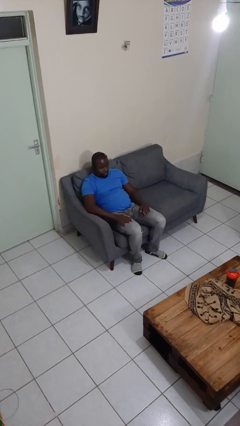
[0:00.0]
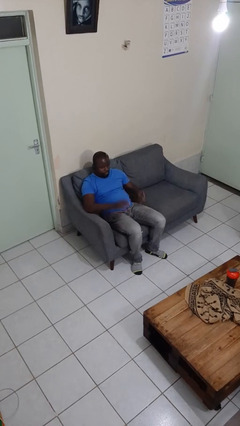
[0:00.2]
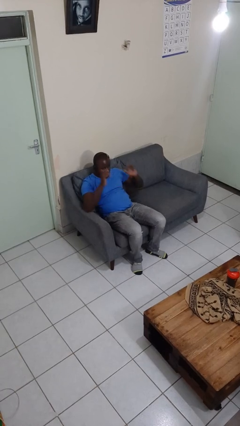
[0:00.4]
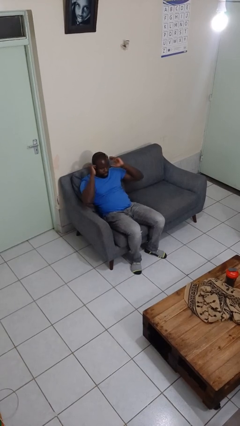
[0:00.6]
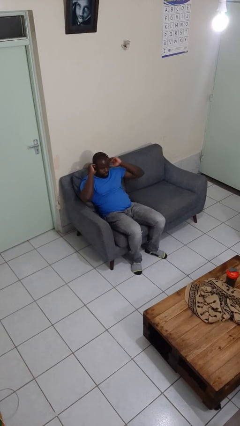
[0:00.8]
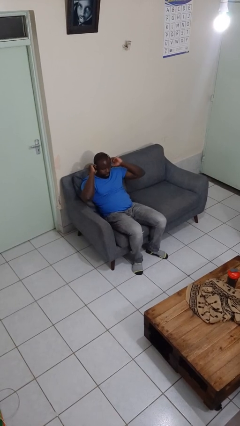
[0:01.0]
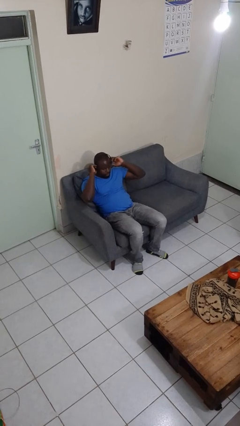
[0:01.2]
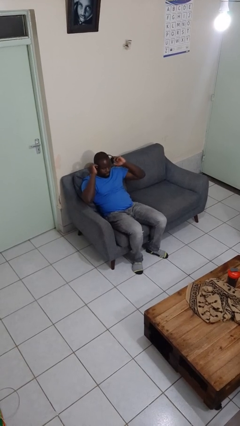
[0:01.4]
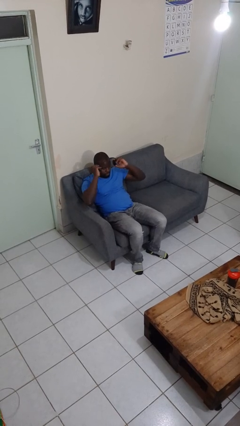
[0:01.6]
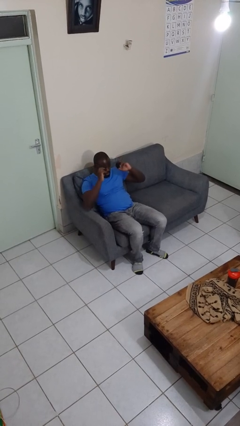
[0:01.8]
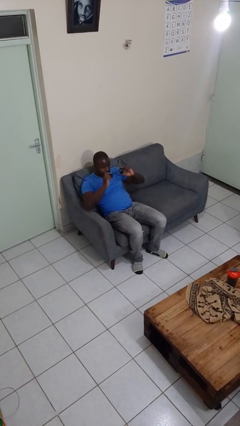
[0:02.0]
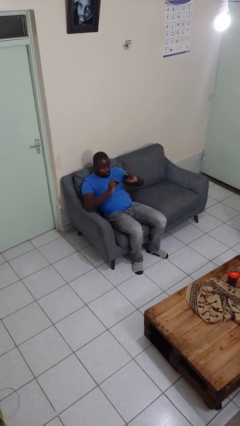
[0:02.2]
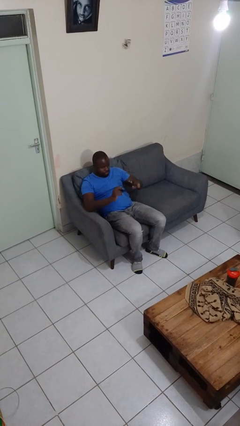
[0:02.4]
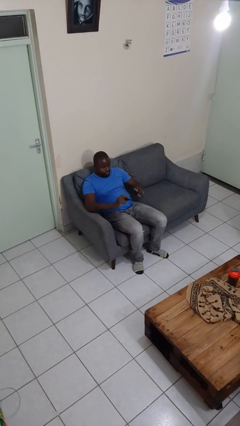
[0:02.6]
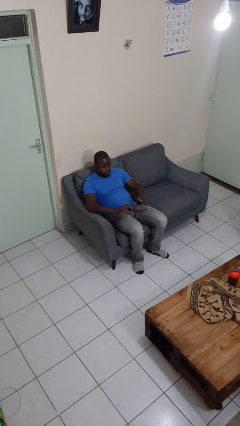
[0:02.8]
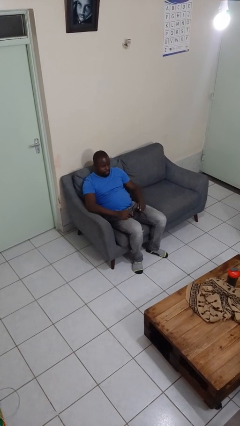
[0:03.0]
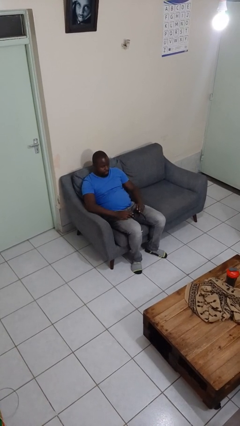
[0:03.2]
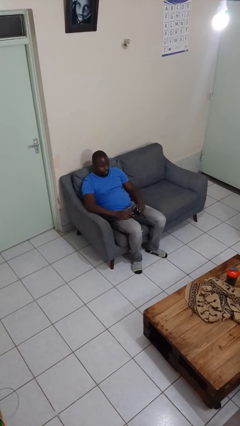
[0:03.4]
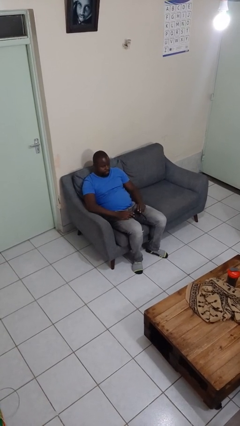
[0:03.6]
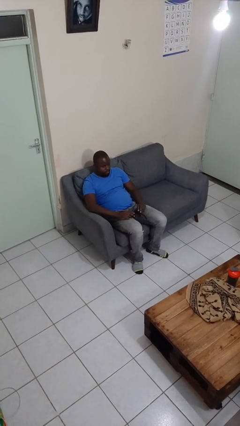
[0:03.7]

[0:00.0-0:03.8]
person takes off headphones

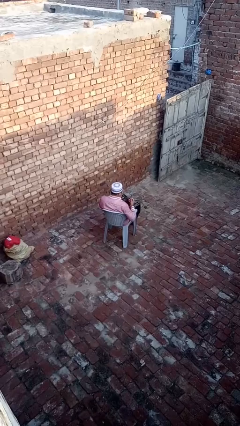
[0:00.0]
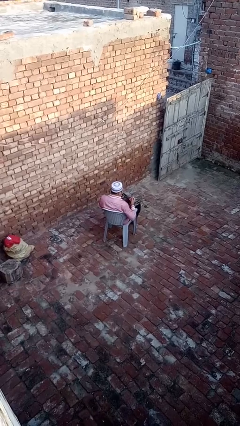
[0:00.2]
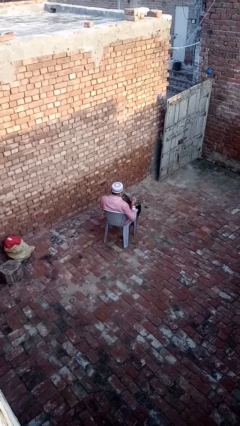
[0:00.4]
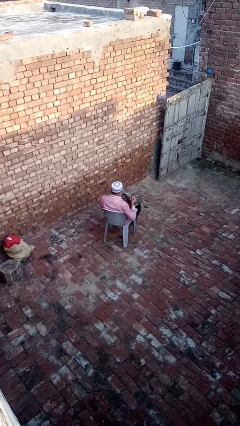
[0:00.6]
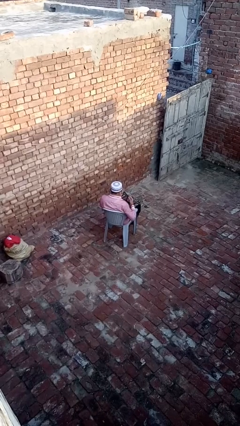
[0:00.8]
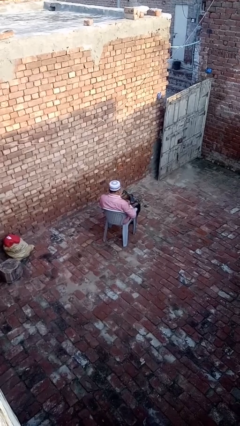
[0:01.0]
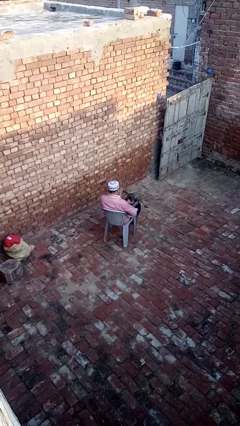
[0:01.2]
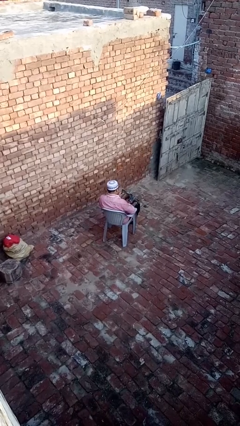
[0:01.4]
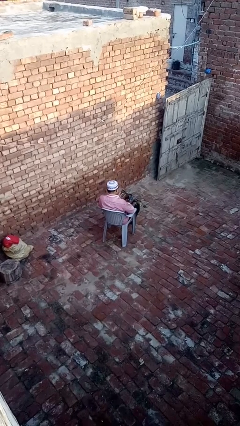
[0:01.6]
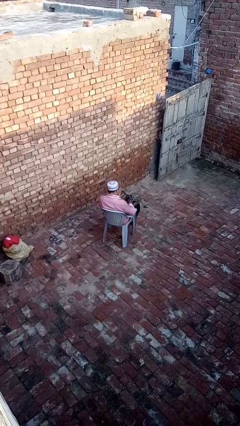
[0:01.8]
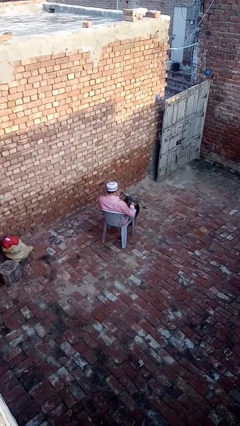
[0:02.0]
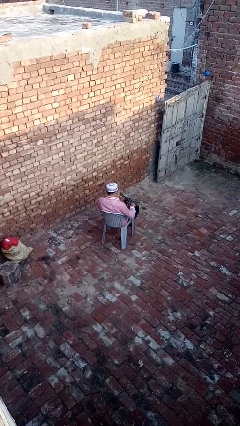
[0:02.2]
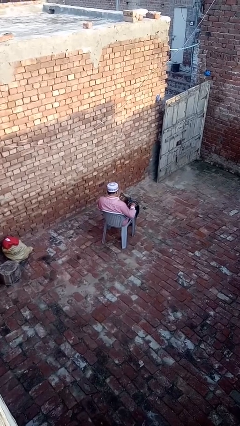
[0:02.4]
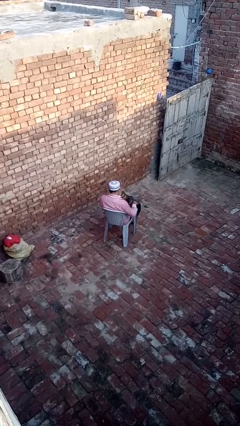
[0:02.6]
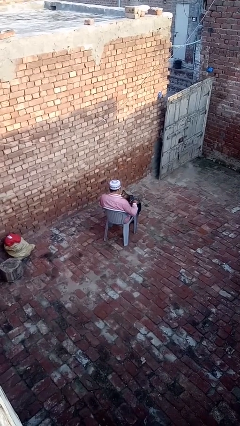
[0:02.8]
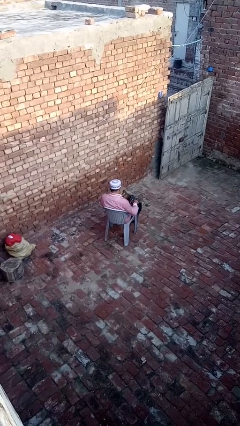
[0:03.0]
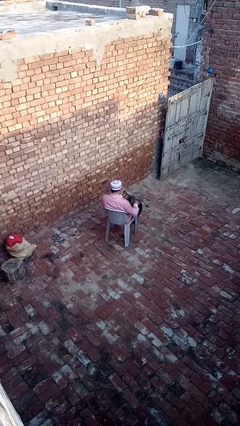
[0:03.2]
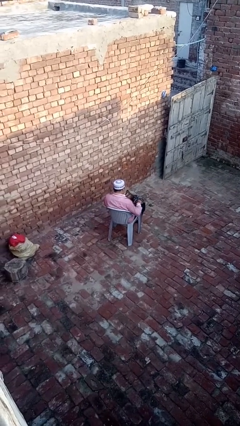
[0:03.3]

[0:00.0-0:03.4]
person puts object into purse

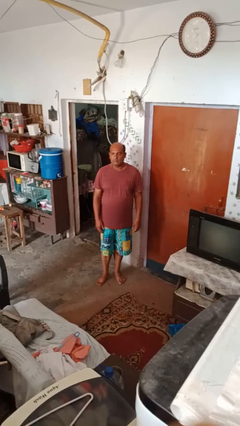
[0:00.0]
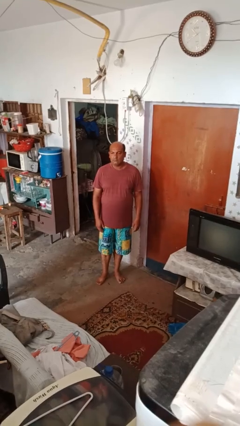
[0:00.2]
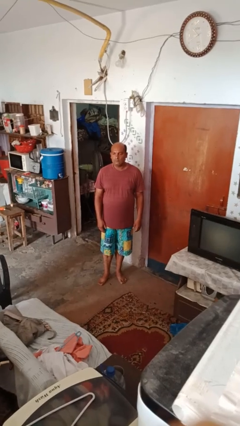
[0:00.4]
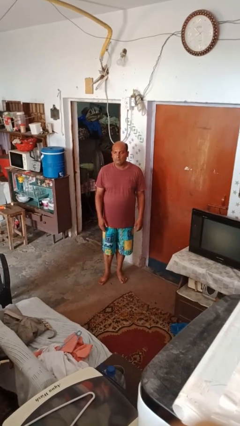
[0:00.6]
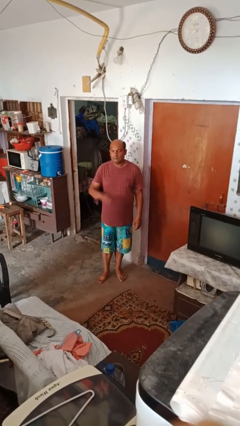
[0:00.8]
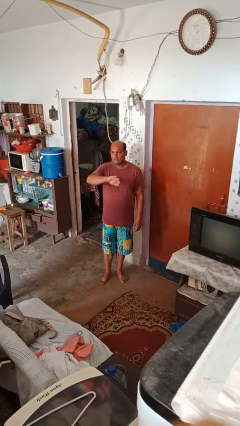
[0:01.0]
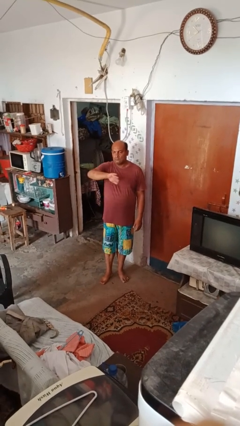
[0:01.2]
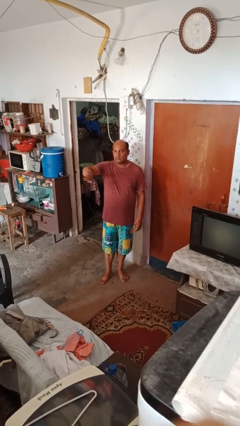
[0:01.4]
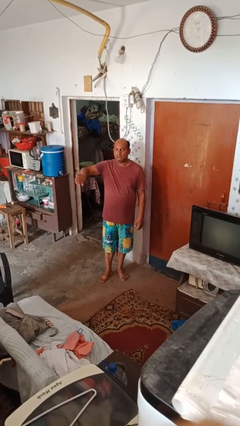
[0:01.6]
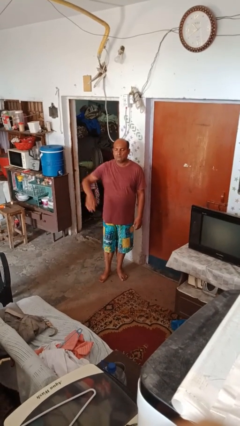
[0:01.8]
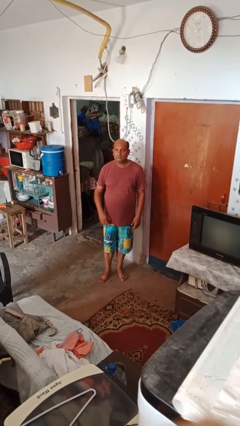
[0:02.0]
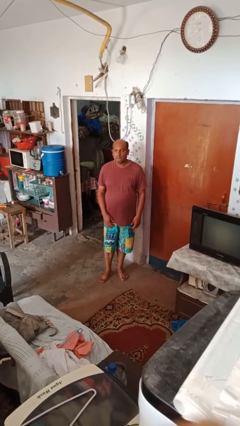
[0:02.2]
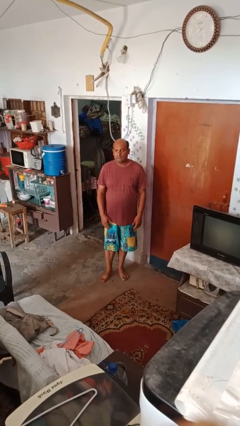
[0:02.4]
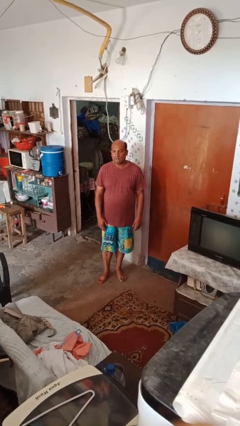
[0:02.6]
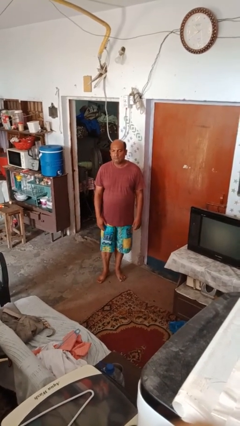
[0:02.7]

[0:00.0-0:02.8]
person gestures swipe left

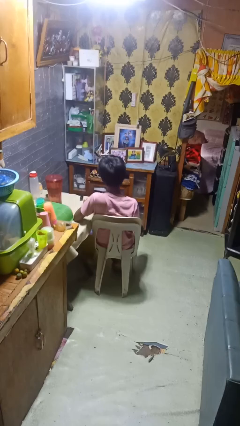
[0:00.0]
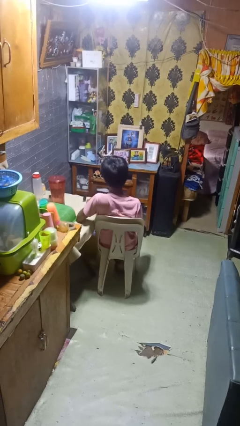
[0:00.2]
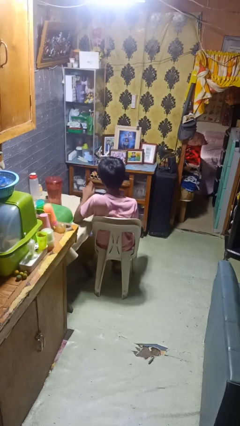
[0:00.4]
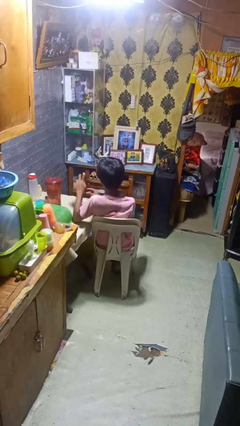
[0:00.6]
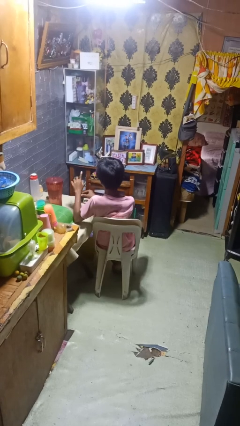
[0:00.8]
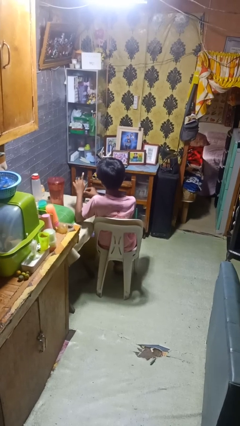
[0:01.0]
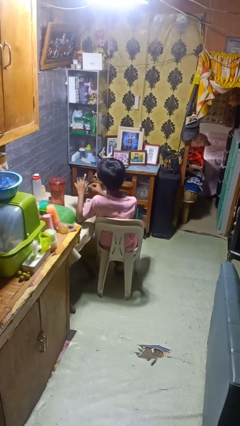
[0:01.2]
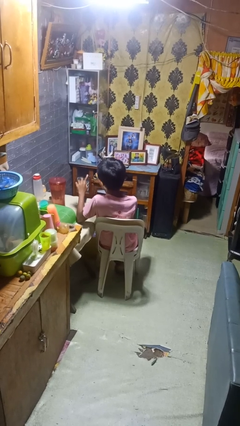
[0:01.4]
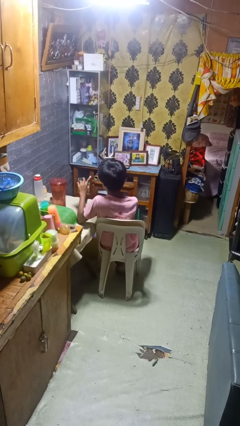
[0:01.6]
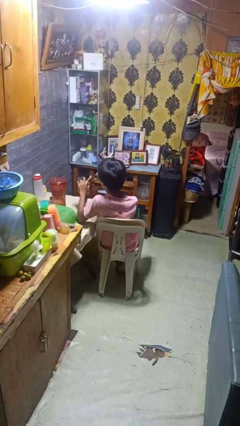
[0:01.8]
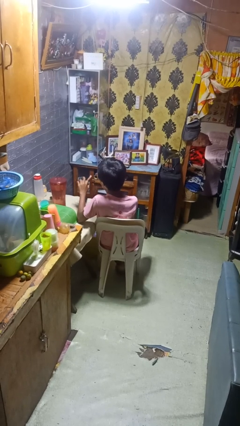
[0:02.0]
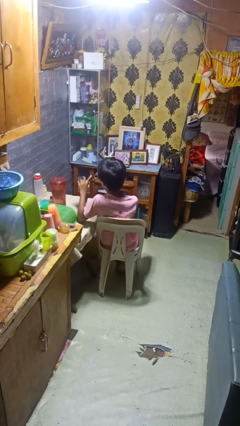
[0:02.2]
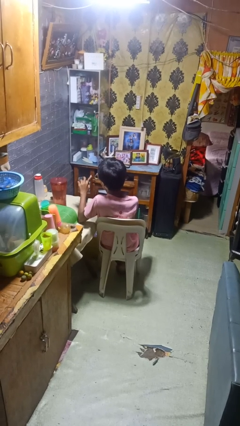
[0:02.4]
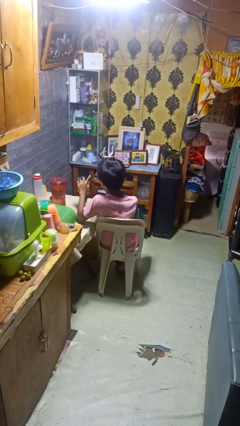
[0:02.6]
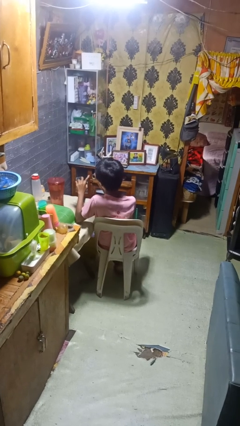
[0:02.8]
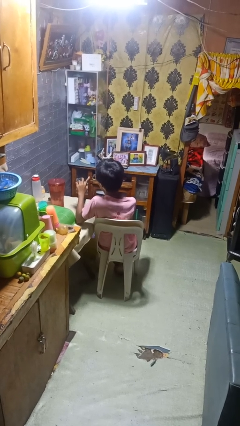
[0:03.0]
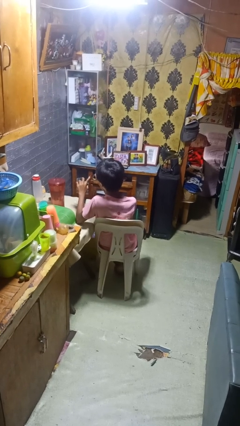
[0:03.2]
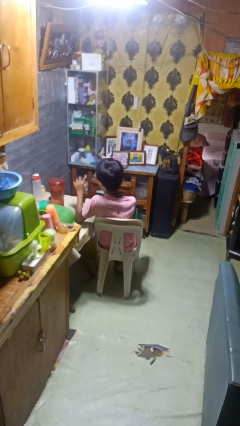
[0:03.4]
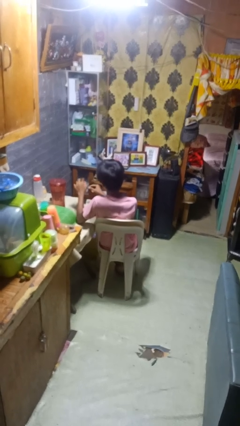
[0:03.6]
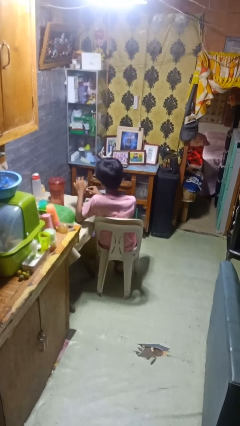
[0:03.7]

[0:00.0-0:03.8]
person paints fingernails

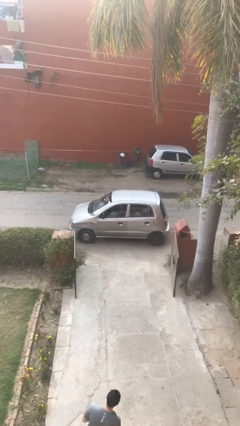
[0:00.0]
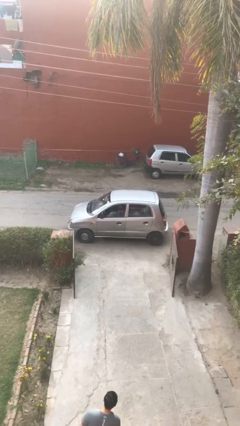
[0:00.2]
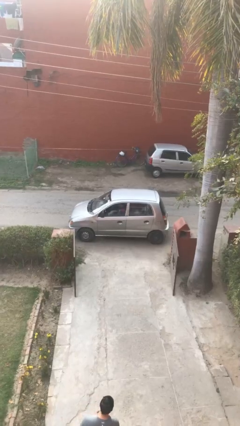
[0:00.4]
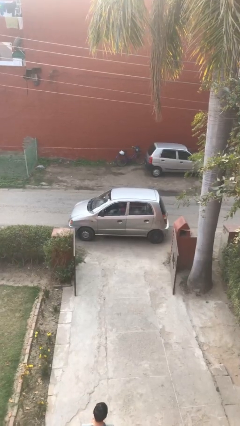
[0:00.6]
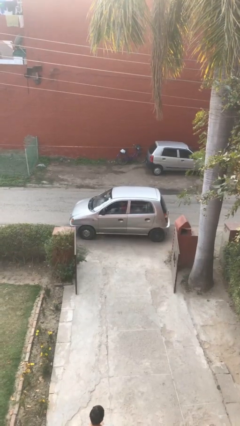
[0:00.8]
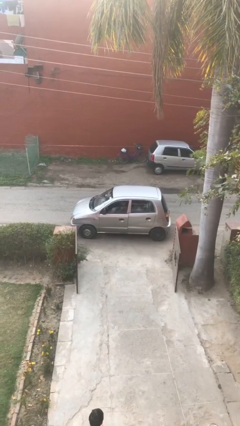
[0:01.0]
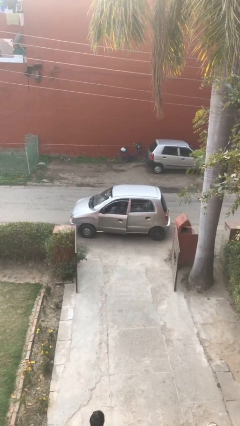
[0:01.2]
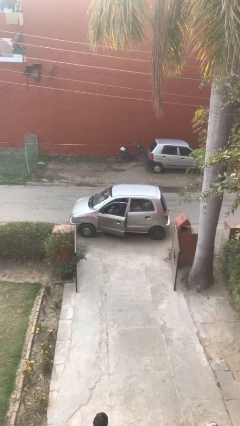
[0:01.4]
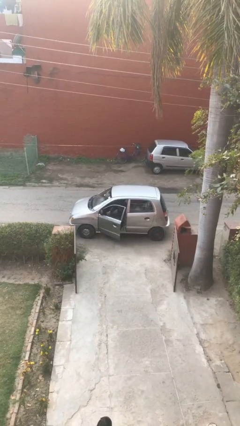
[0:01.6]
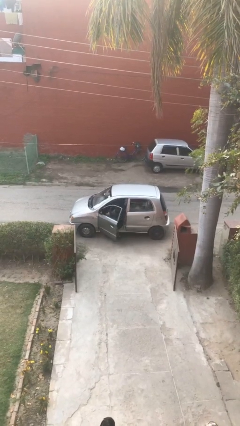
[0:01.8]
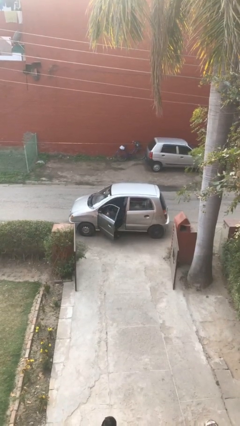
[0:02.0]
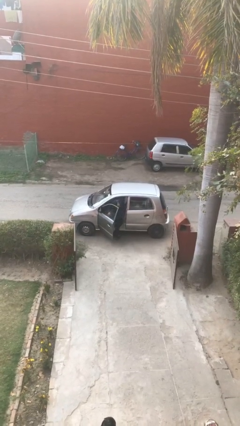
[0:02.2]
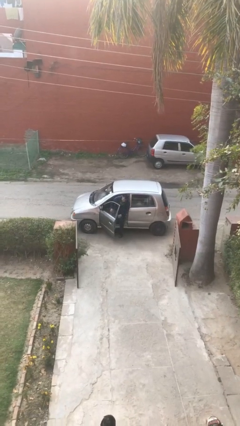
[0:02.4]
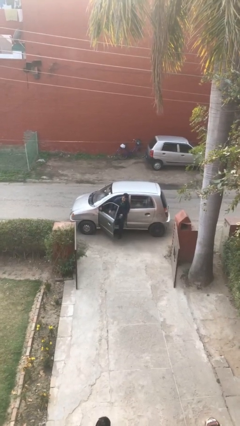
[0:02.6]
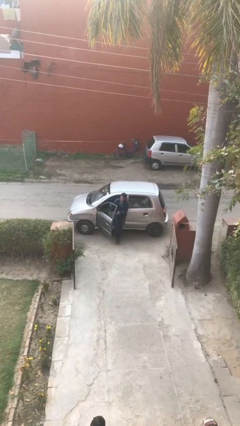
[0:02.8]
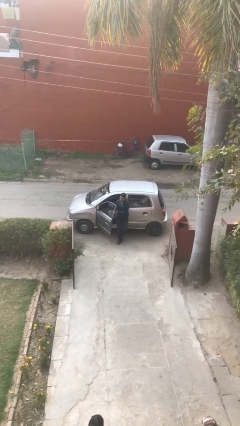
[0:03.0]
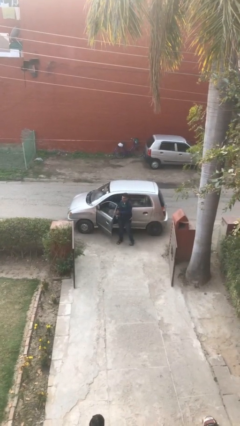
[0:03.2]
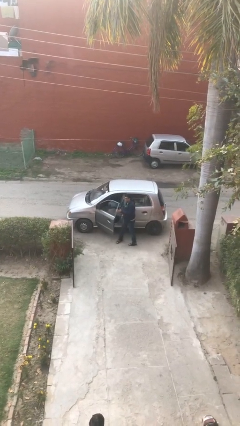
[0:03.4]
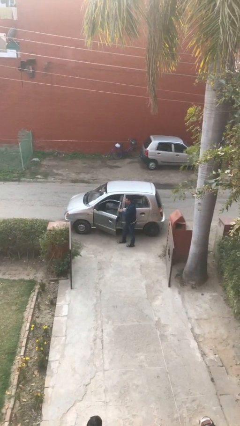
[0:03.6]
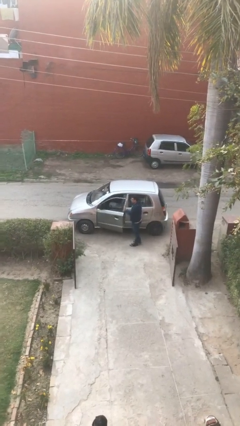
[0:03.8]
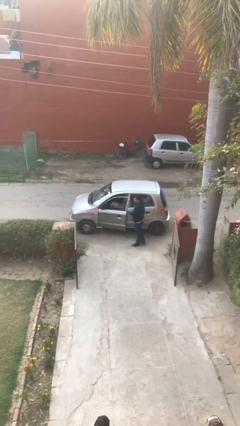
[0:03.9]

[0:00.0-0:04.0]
car drops off person
